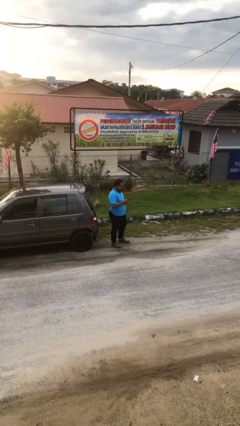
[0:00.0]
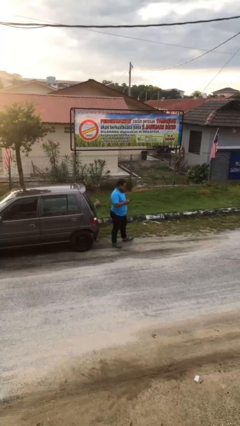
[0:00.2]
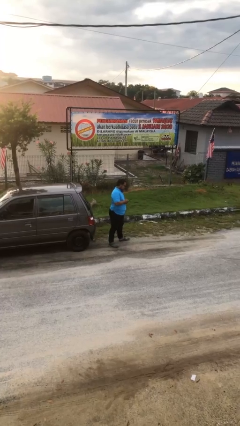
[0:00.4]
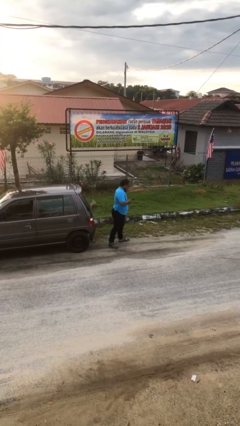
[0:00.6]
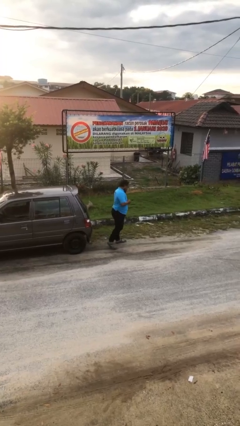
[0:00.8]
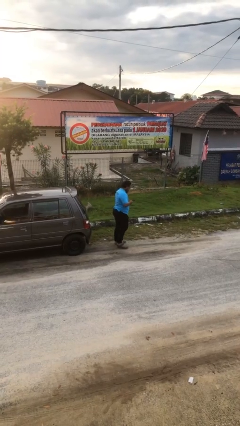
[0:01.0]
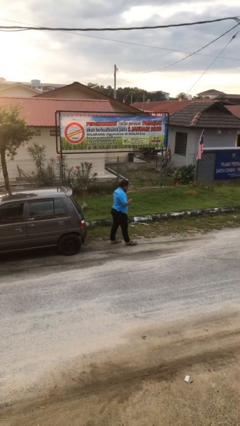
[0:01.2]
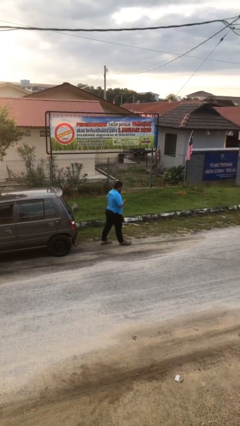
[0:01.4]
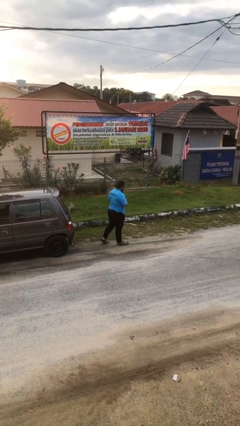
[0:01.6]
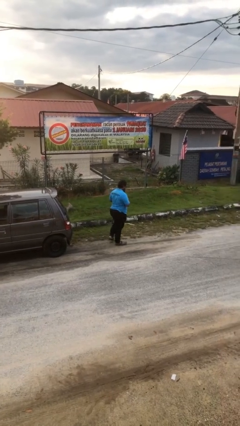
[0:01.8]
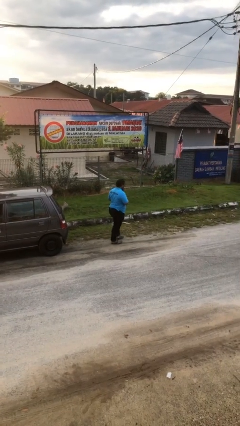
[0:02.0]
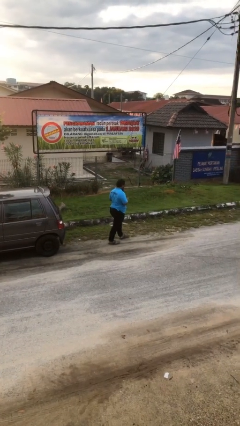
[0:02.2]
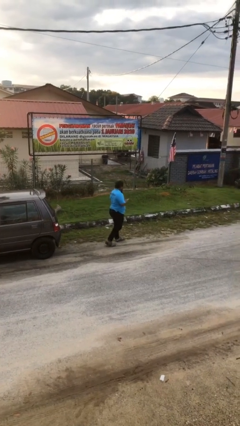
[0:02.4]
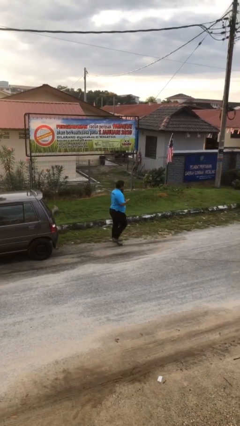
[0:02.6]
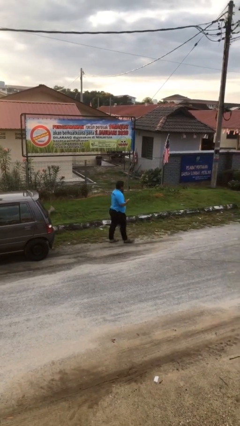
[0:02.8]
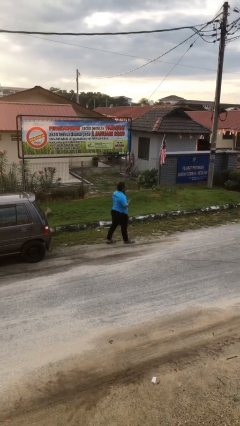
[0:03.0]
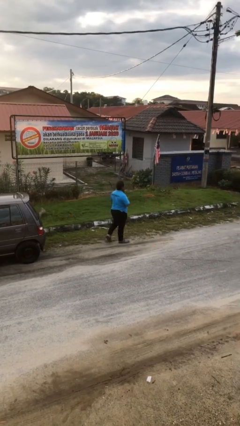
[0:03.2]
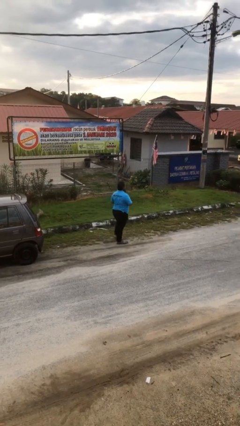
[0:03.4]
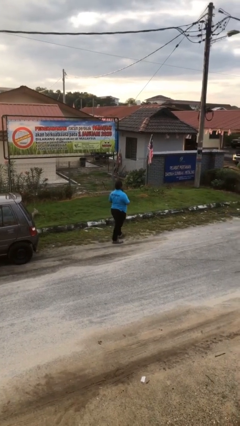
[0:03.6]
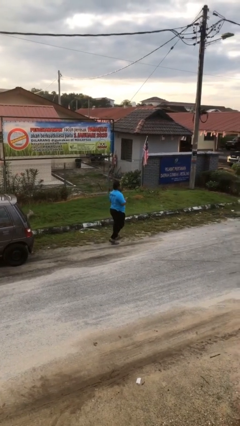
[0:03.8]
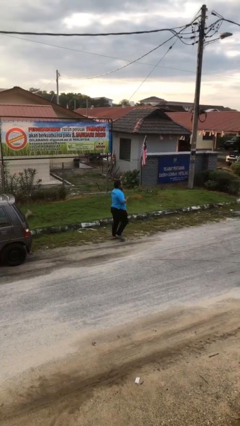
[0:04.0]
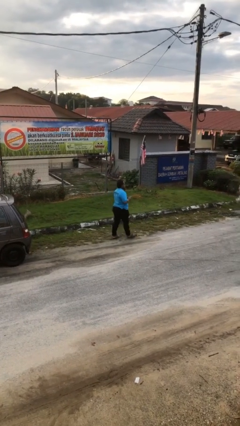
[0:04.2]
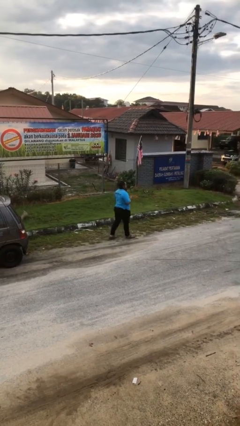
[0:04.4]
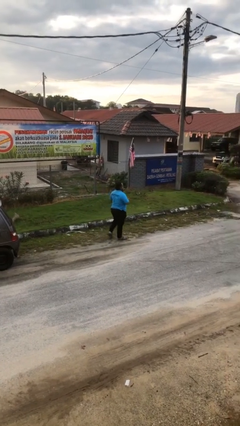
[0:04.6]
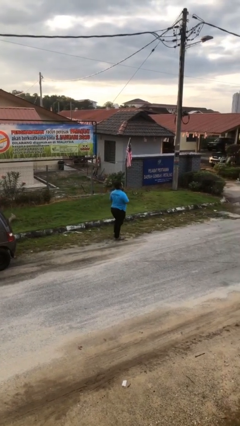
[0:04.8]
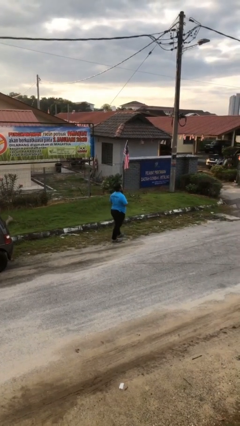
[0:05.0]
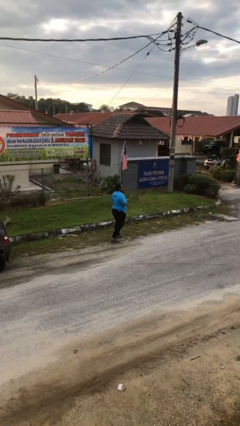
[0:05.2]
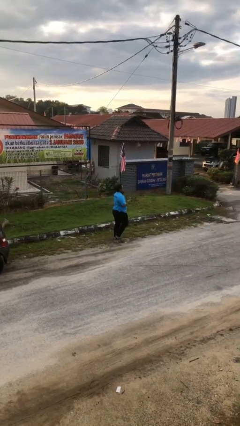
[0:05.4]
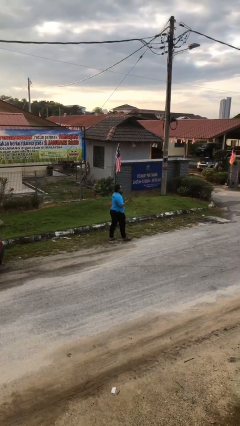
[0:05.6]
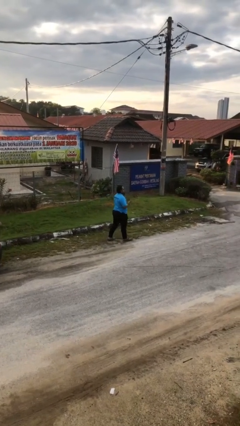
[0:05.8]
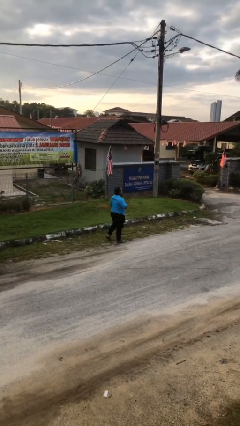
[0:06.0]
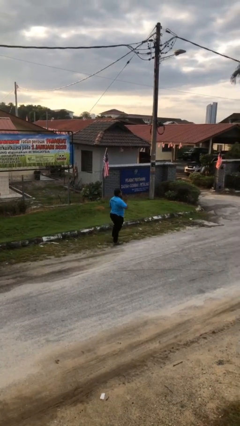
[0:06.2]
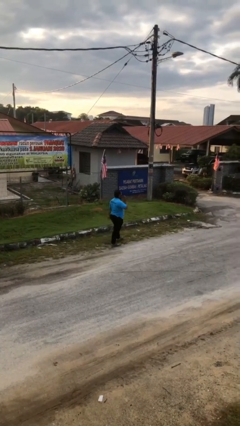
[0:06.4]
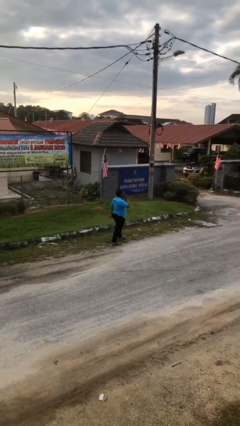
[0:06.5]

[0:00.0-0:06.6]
person texts on phone

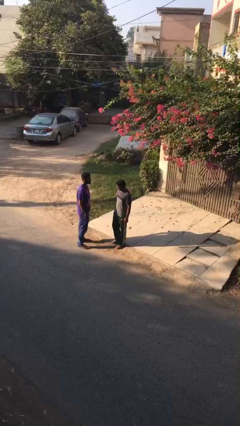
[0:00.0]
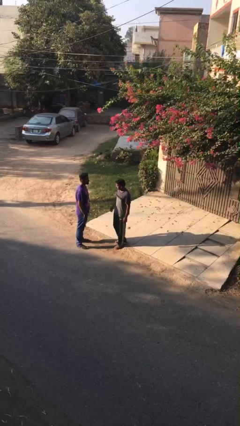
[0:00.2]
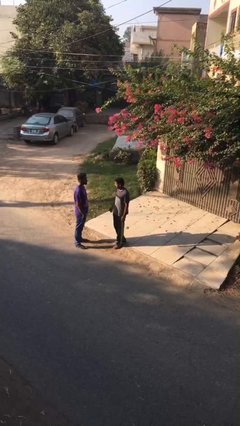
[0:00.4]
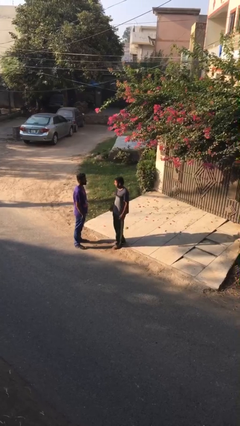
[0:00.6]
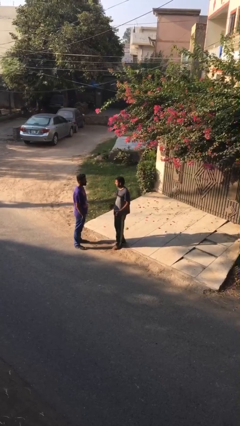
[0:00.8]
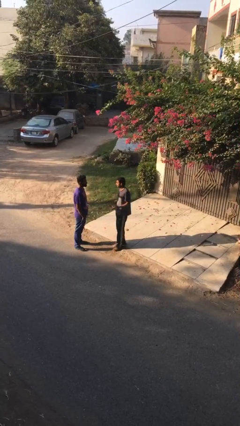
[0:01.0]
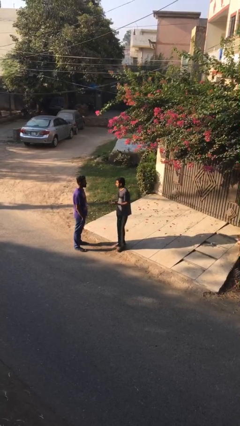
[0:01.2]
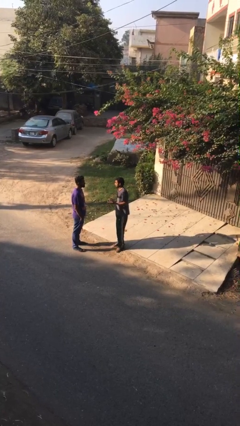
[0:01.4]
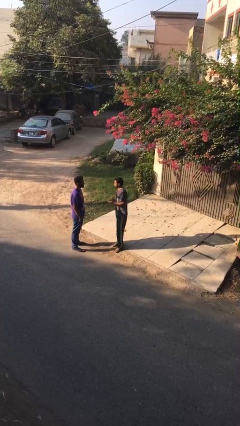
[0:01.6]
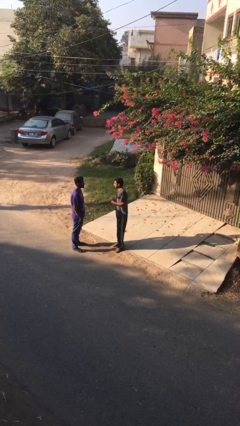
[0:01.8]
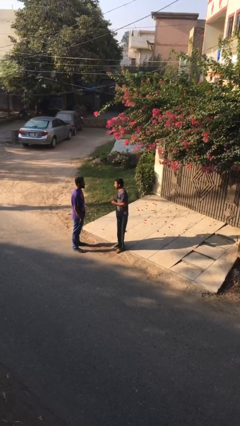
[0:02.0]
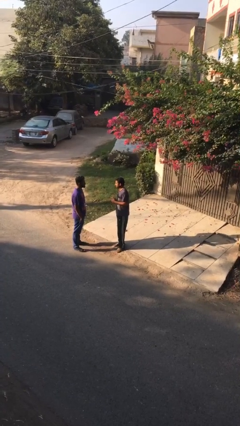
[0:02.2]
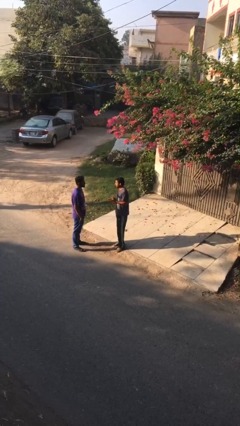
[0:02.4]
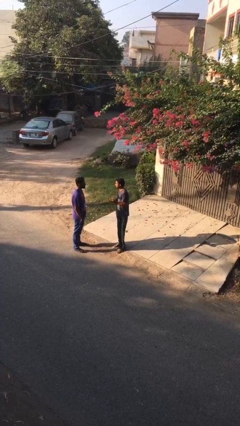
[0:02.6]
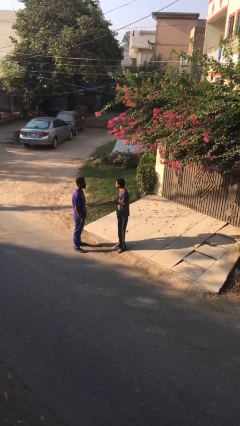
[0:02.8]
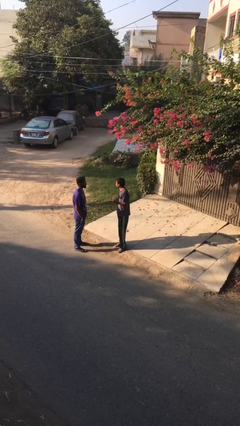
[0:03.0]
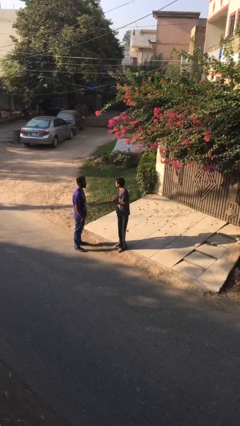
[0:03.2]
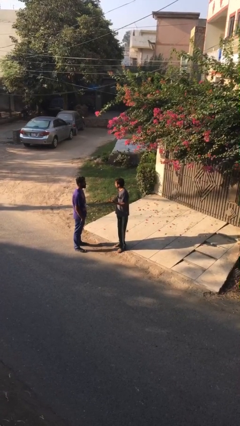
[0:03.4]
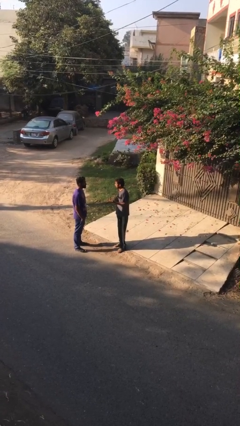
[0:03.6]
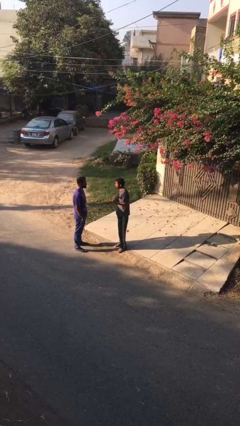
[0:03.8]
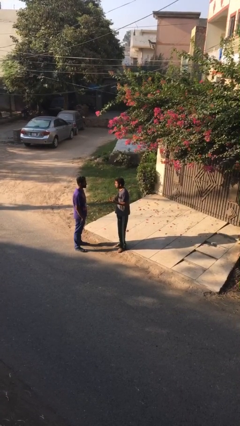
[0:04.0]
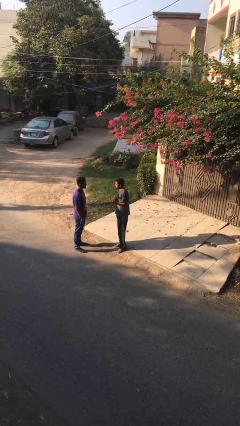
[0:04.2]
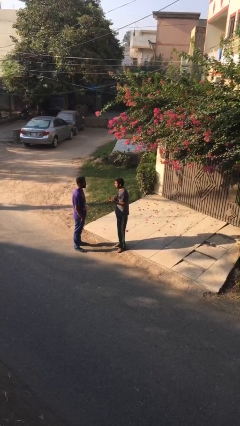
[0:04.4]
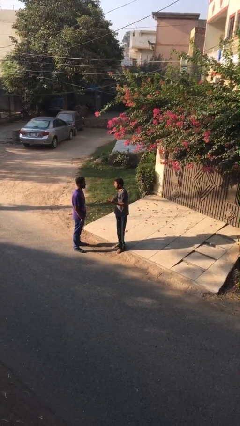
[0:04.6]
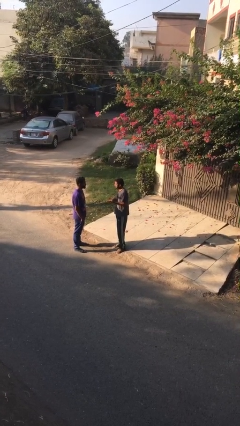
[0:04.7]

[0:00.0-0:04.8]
person talks to person

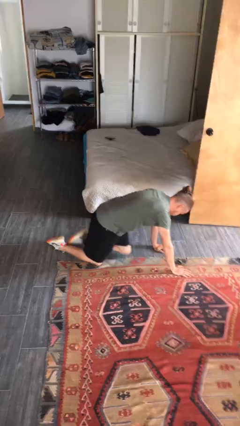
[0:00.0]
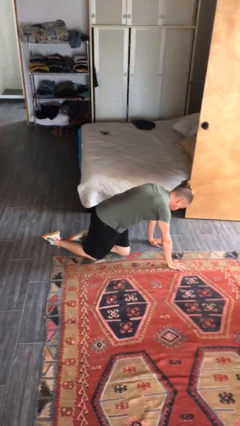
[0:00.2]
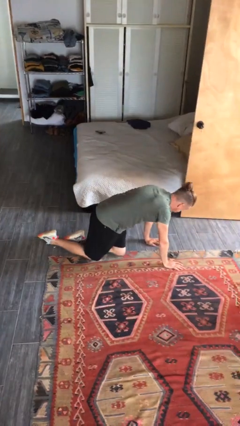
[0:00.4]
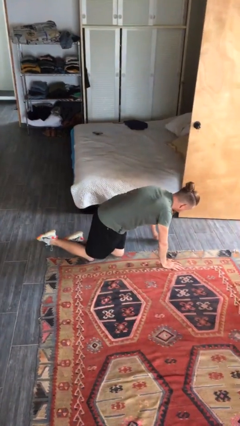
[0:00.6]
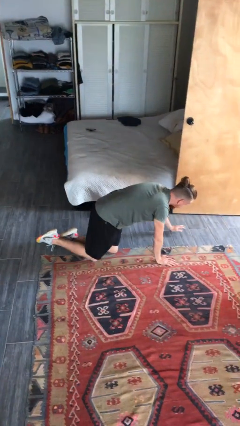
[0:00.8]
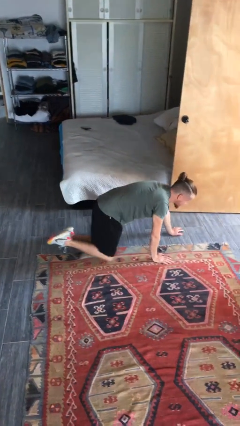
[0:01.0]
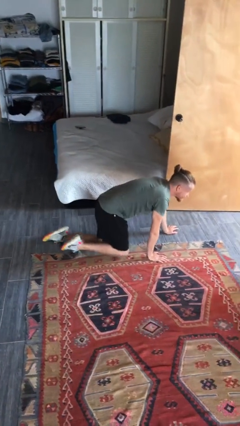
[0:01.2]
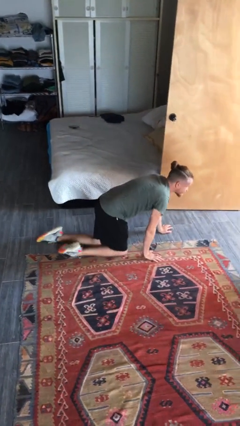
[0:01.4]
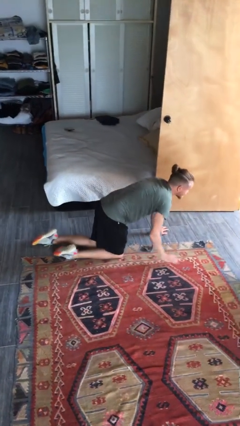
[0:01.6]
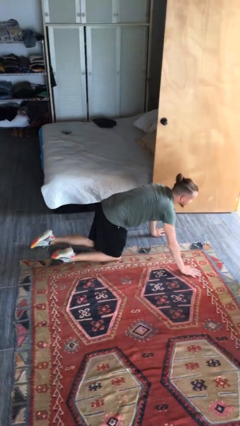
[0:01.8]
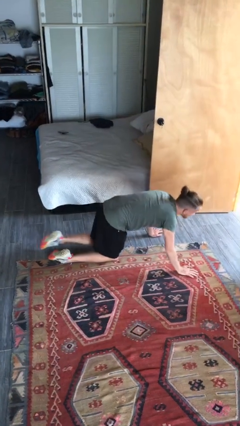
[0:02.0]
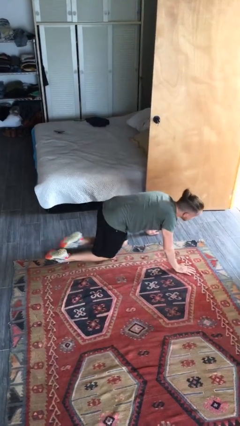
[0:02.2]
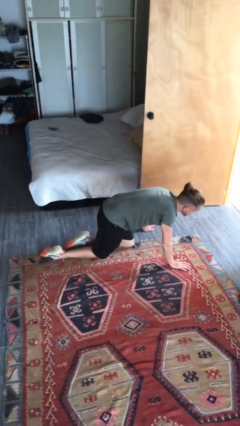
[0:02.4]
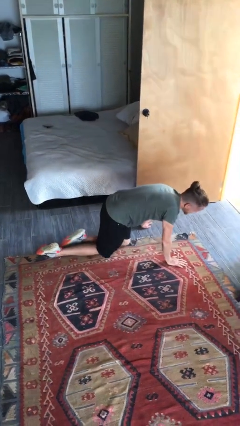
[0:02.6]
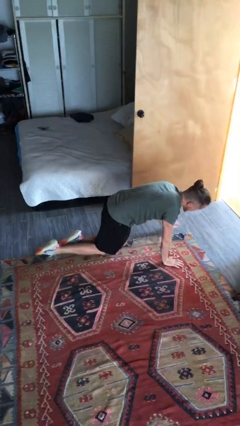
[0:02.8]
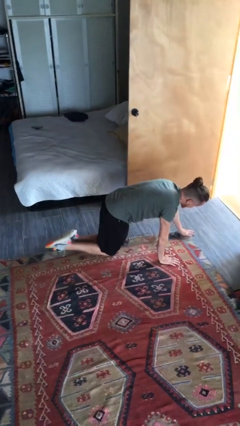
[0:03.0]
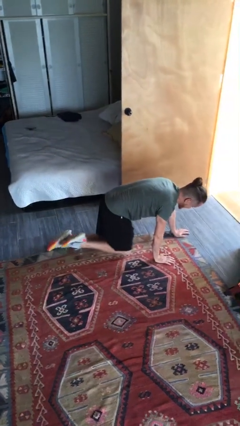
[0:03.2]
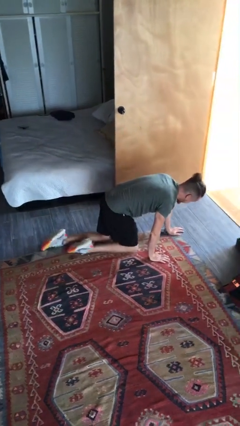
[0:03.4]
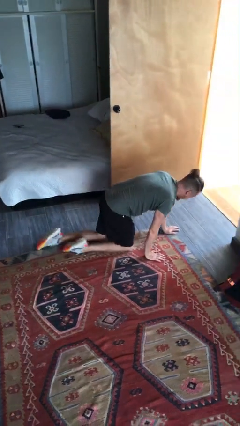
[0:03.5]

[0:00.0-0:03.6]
person crawls

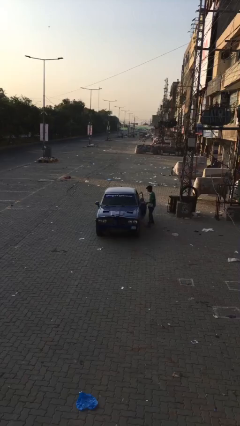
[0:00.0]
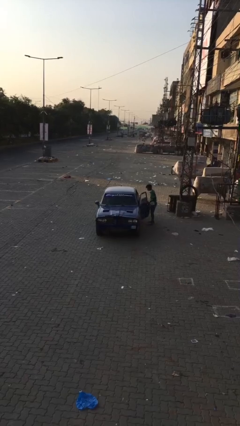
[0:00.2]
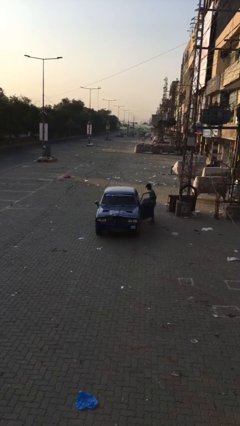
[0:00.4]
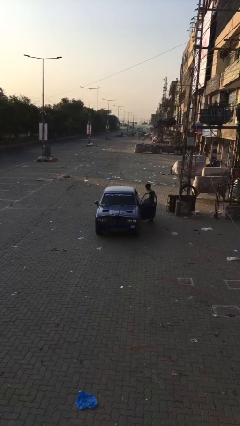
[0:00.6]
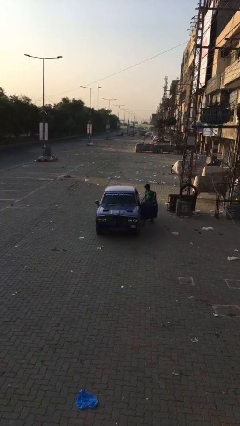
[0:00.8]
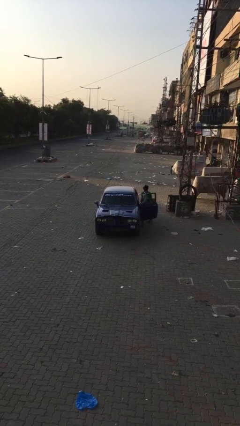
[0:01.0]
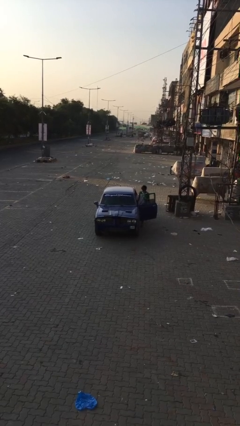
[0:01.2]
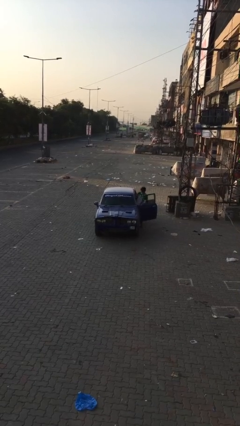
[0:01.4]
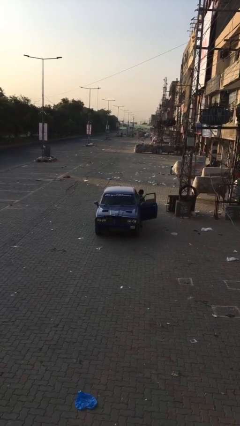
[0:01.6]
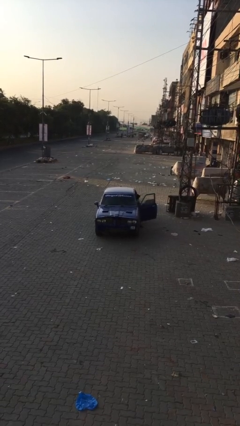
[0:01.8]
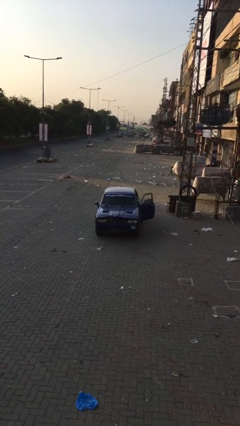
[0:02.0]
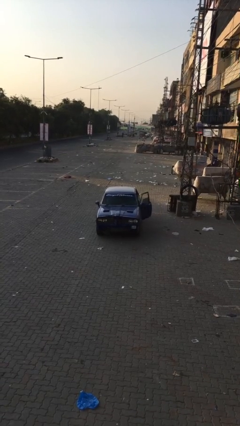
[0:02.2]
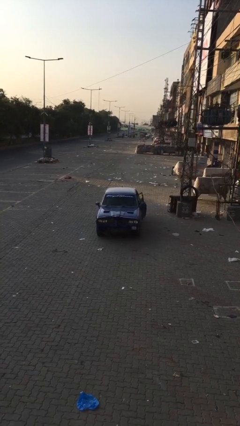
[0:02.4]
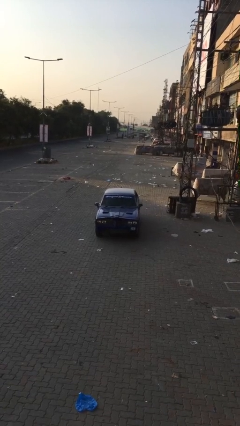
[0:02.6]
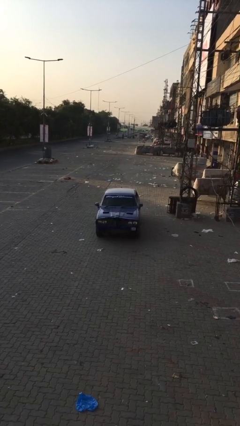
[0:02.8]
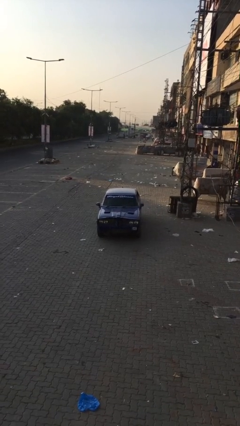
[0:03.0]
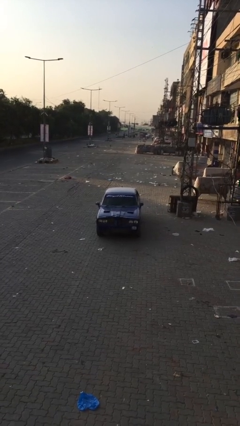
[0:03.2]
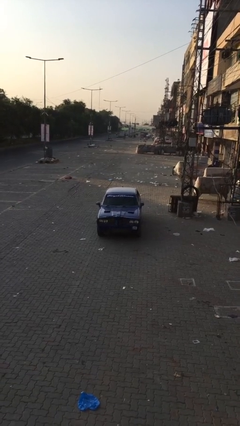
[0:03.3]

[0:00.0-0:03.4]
car picks up person
